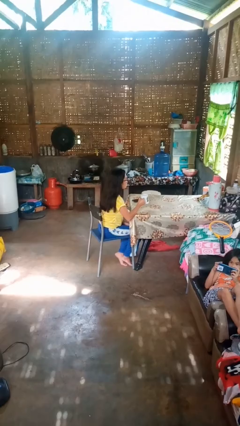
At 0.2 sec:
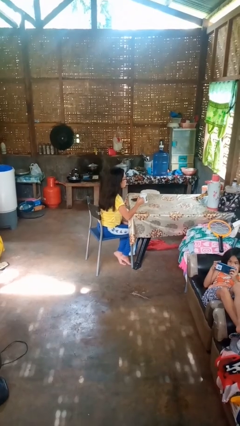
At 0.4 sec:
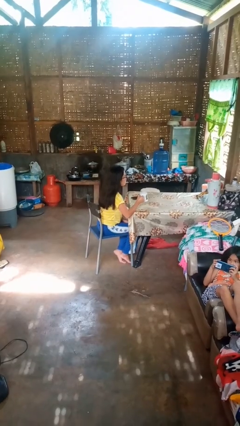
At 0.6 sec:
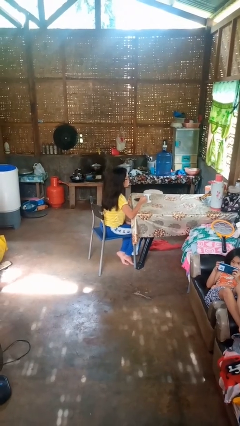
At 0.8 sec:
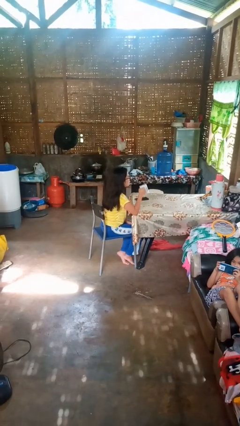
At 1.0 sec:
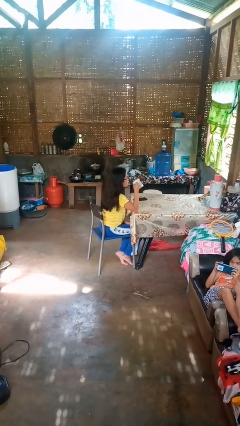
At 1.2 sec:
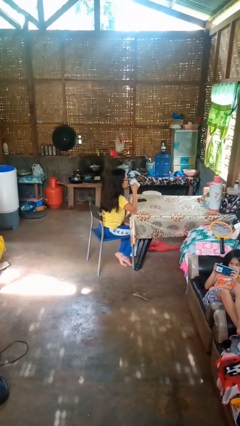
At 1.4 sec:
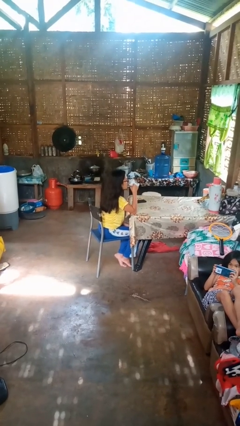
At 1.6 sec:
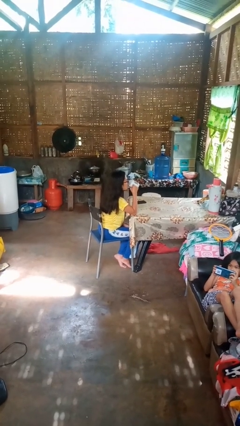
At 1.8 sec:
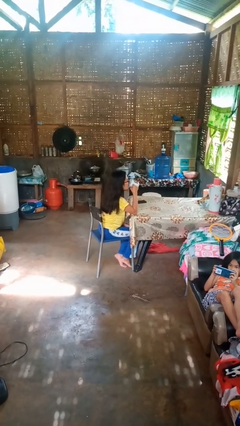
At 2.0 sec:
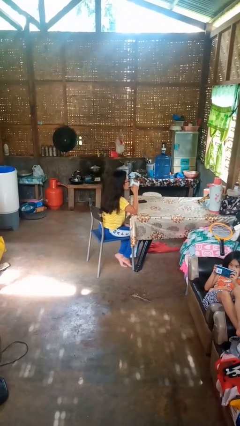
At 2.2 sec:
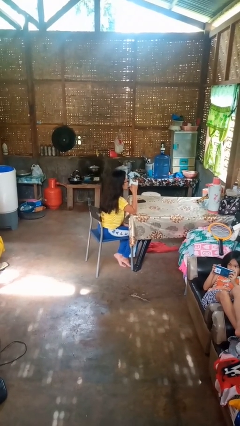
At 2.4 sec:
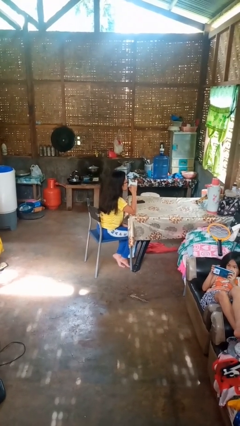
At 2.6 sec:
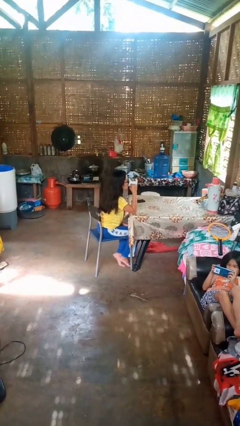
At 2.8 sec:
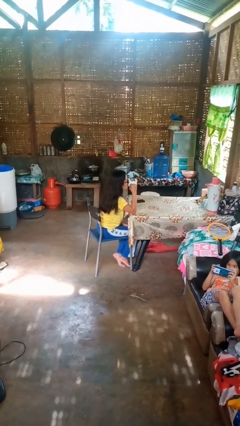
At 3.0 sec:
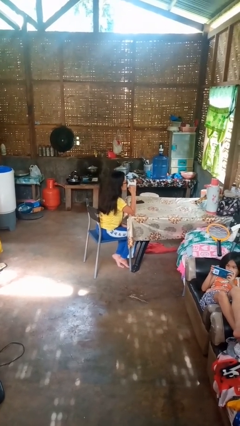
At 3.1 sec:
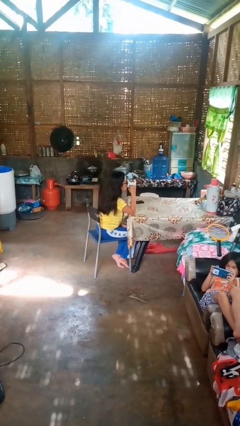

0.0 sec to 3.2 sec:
person drinks from mug

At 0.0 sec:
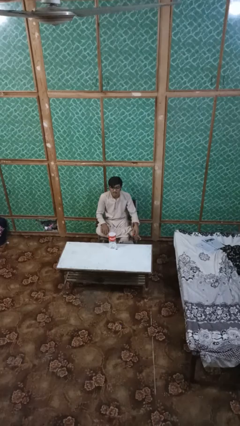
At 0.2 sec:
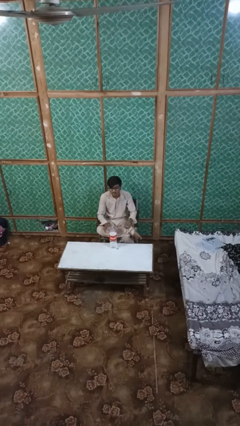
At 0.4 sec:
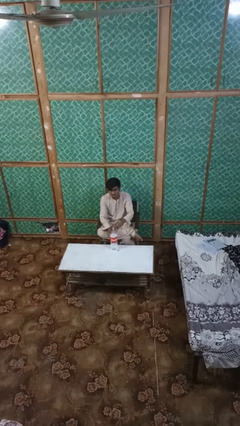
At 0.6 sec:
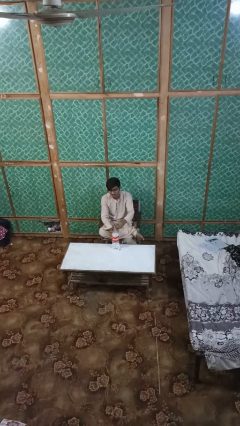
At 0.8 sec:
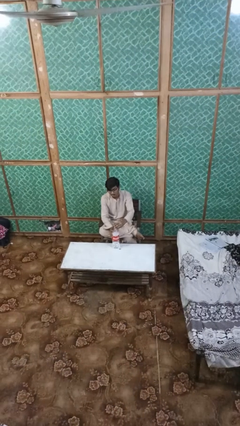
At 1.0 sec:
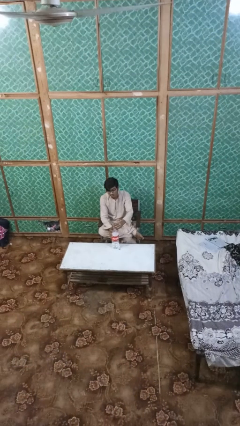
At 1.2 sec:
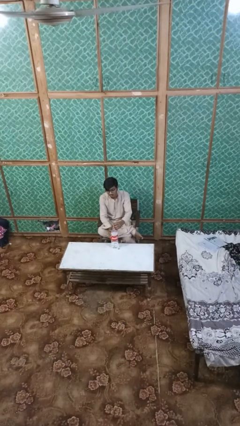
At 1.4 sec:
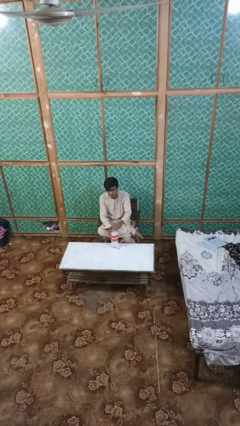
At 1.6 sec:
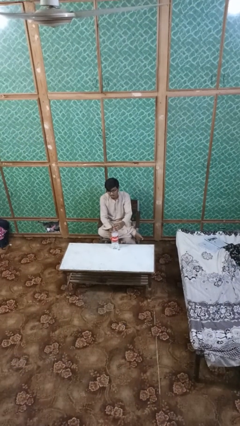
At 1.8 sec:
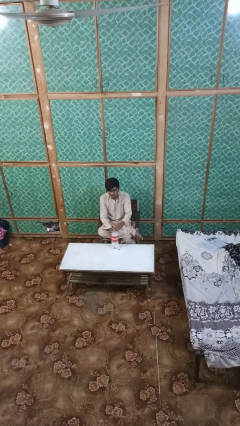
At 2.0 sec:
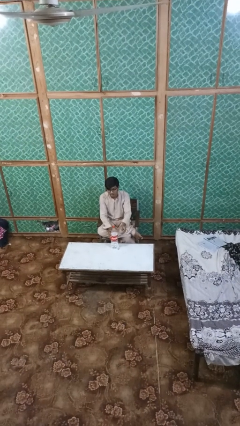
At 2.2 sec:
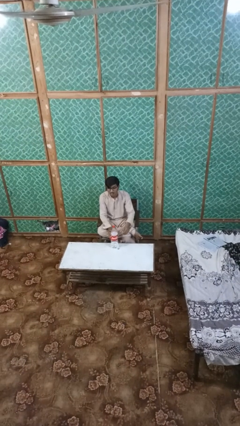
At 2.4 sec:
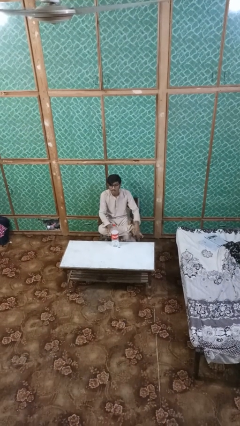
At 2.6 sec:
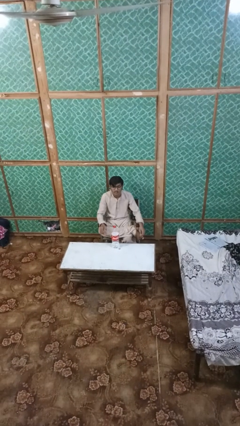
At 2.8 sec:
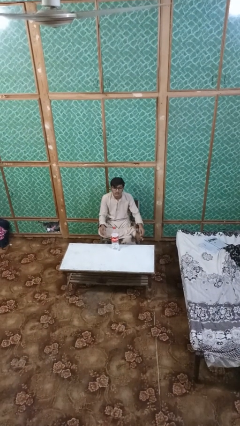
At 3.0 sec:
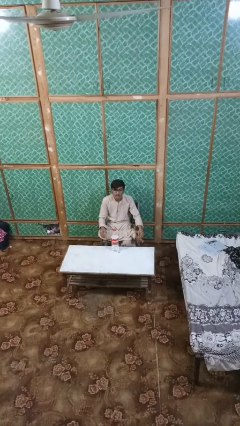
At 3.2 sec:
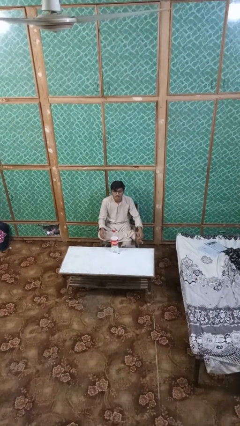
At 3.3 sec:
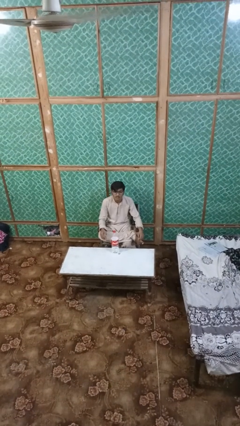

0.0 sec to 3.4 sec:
person screws lid to bottle

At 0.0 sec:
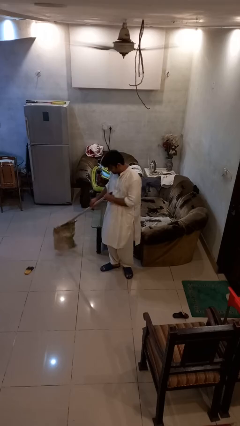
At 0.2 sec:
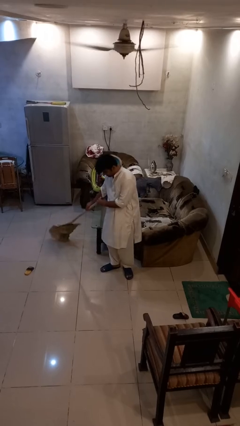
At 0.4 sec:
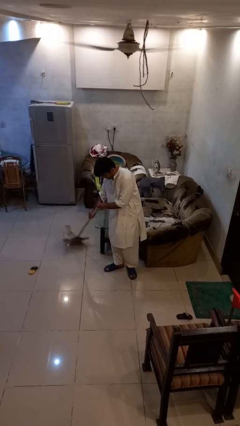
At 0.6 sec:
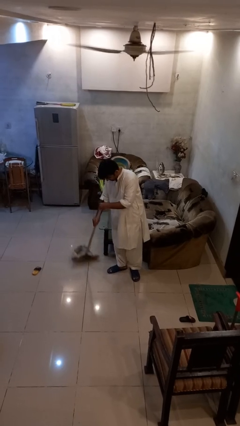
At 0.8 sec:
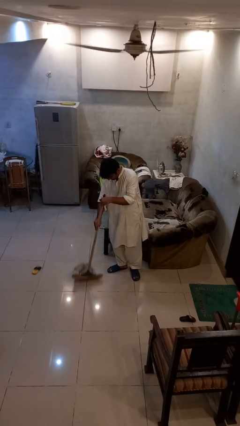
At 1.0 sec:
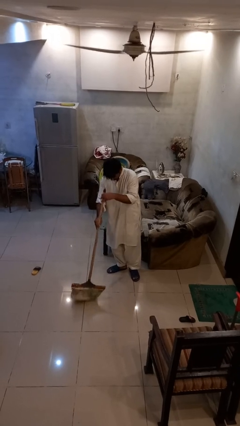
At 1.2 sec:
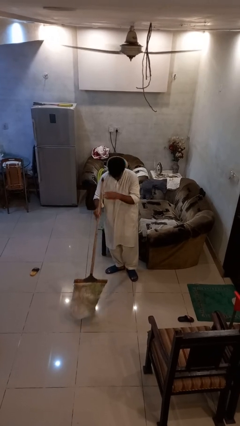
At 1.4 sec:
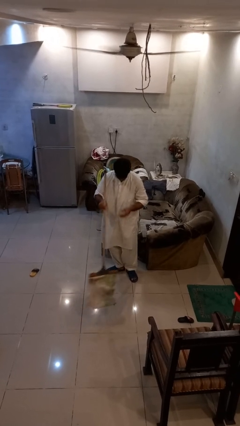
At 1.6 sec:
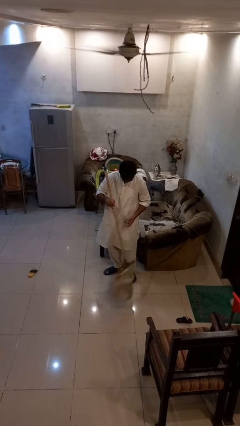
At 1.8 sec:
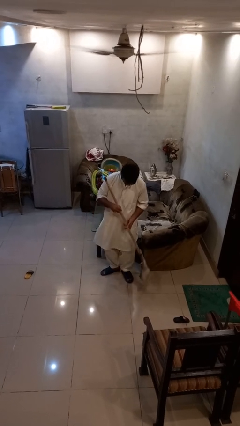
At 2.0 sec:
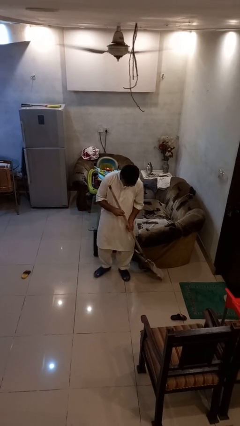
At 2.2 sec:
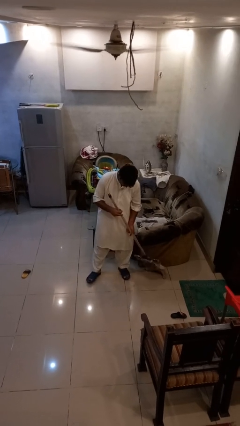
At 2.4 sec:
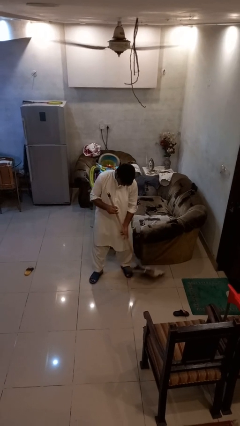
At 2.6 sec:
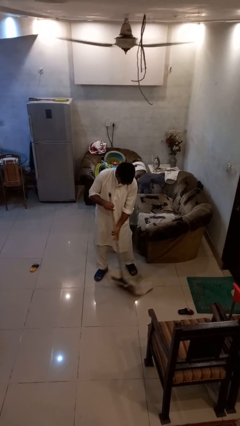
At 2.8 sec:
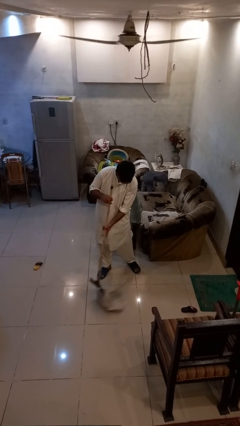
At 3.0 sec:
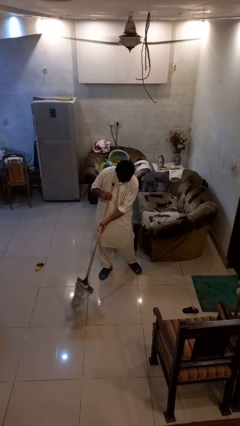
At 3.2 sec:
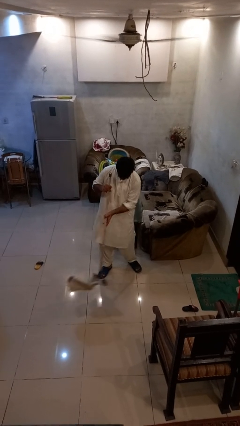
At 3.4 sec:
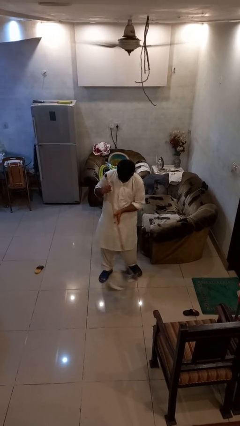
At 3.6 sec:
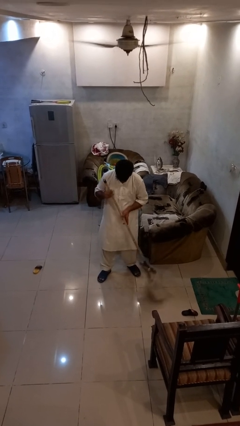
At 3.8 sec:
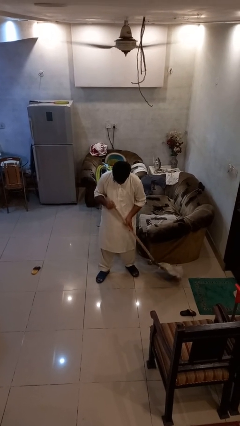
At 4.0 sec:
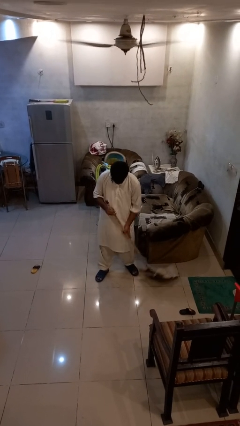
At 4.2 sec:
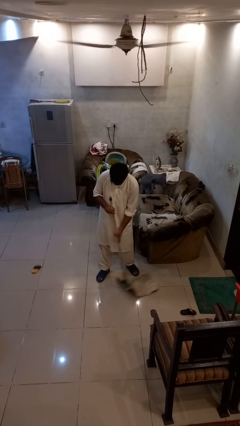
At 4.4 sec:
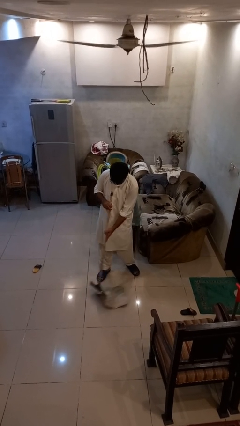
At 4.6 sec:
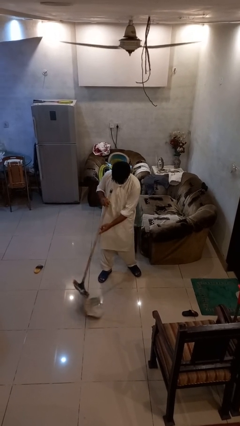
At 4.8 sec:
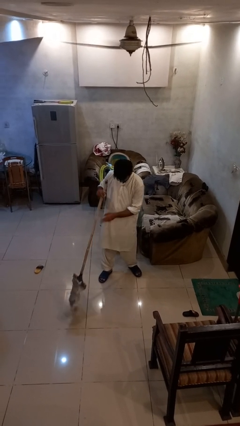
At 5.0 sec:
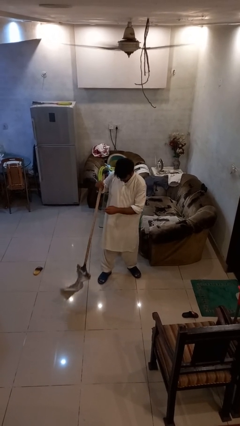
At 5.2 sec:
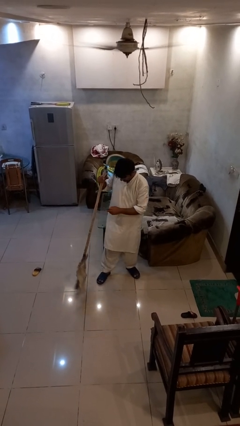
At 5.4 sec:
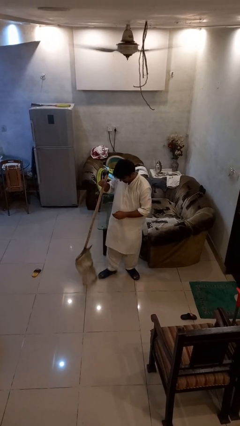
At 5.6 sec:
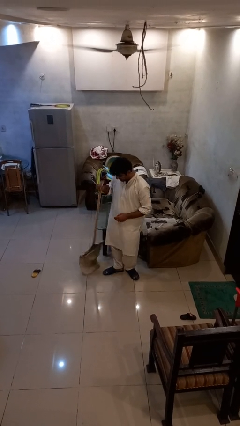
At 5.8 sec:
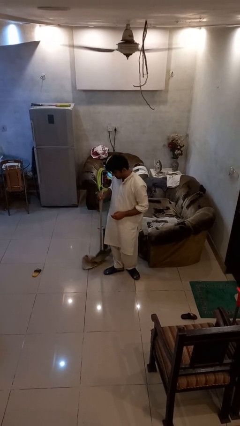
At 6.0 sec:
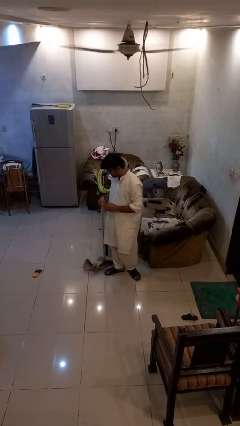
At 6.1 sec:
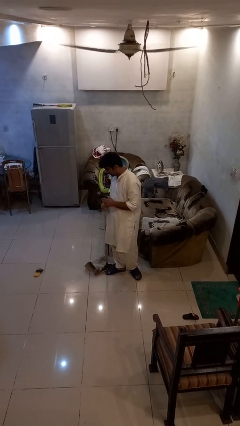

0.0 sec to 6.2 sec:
person mops

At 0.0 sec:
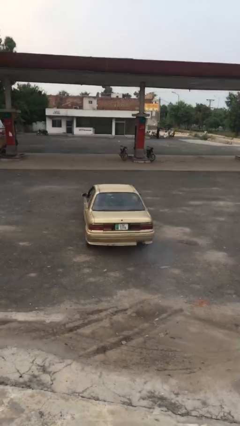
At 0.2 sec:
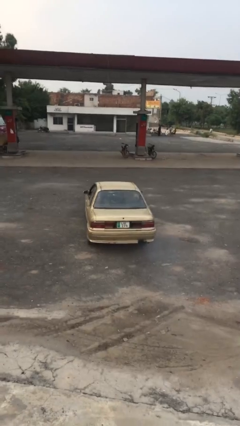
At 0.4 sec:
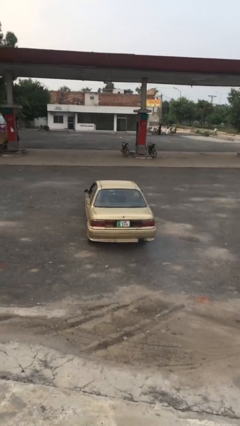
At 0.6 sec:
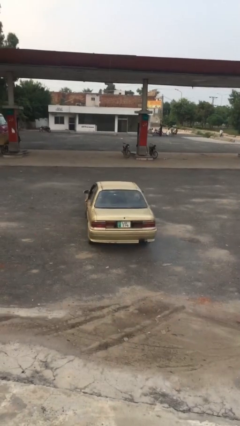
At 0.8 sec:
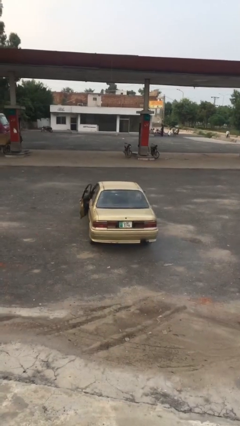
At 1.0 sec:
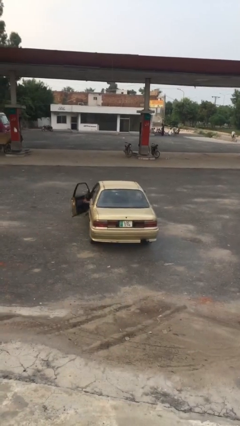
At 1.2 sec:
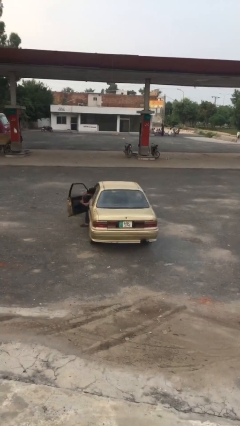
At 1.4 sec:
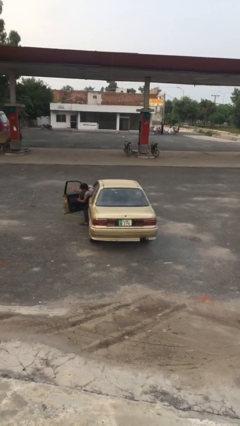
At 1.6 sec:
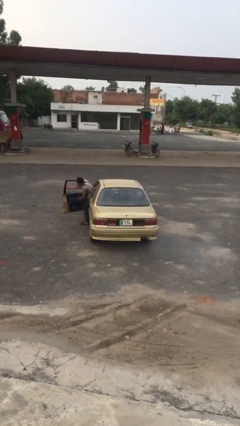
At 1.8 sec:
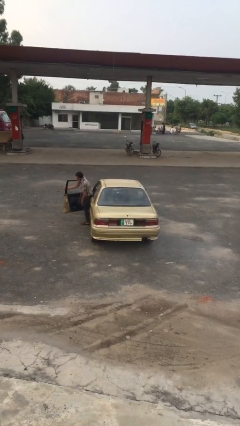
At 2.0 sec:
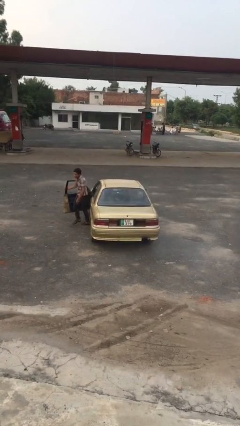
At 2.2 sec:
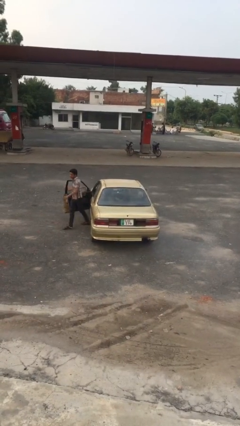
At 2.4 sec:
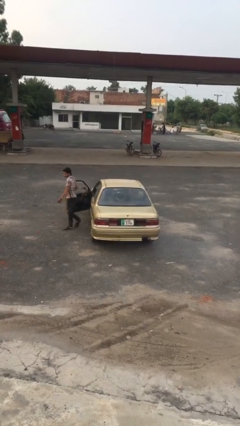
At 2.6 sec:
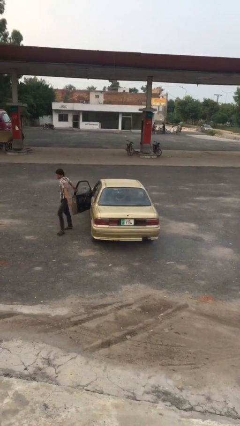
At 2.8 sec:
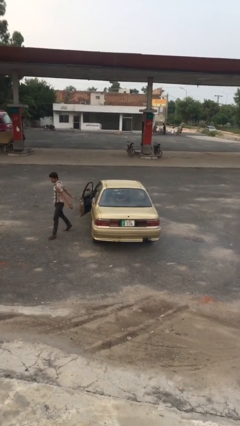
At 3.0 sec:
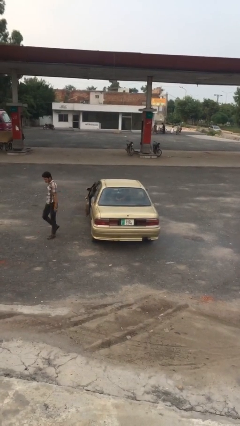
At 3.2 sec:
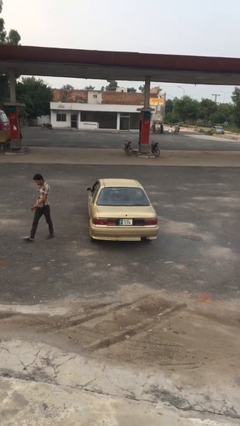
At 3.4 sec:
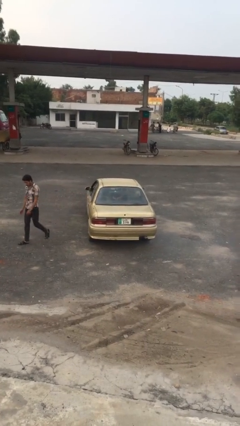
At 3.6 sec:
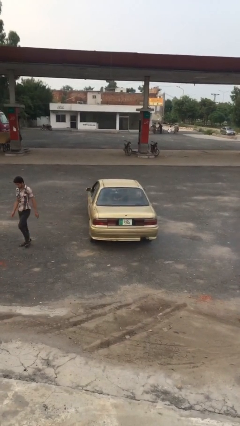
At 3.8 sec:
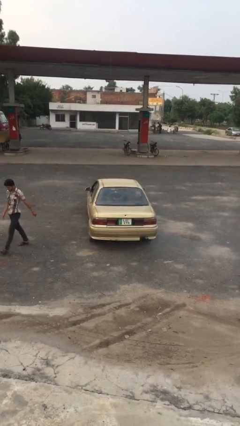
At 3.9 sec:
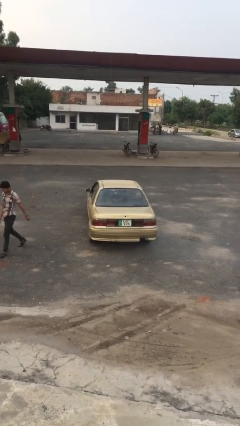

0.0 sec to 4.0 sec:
car drops off person

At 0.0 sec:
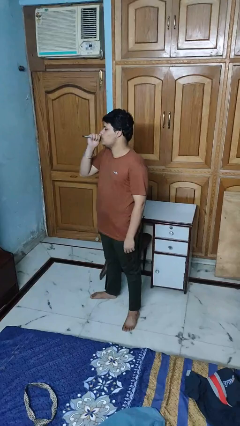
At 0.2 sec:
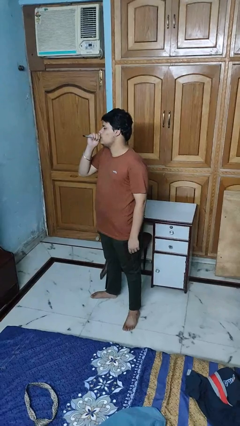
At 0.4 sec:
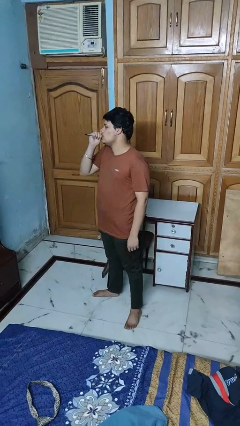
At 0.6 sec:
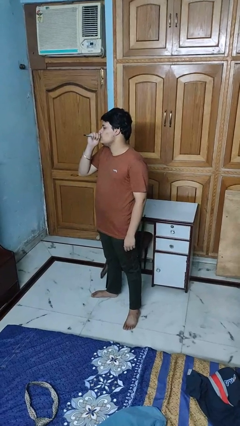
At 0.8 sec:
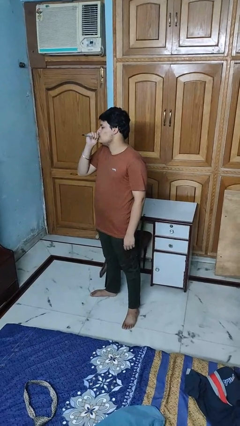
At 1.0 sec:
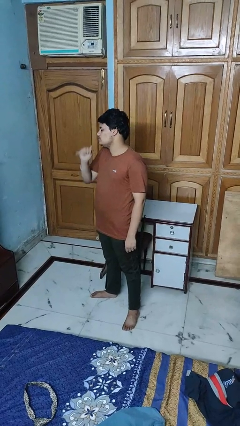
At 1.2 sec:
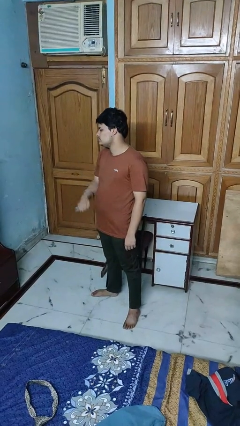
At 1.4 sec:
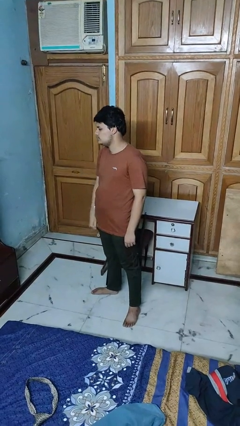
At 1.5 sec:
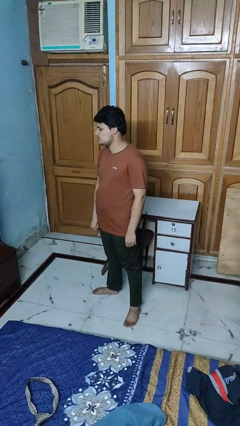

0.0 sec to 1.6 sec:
person vapes
